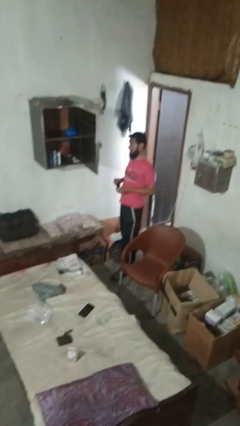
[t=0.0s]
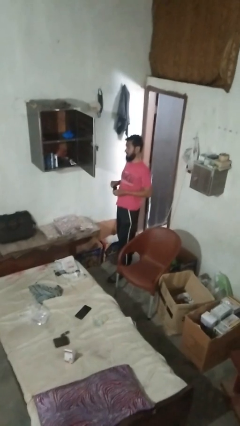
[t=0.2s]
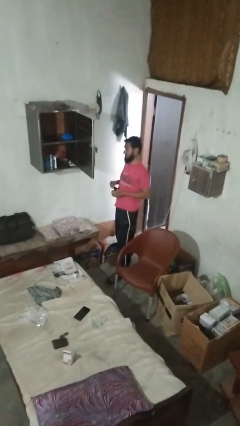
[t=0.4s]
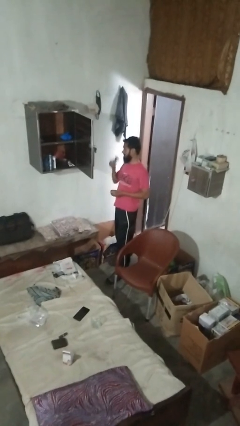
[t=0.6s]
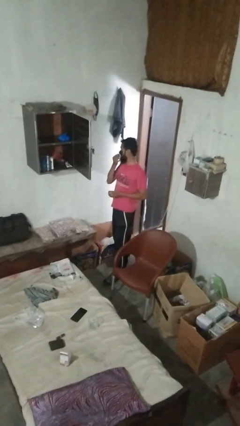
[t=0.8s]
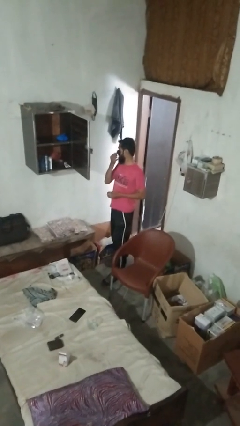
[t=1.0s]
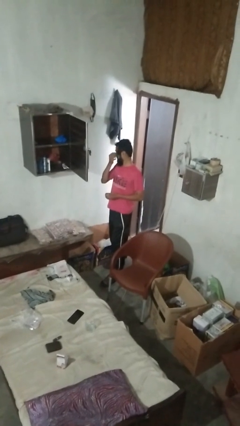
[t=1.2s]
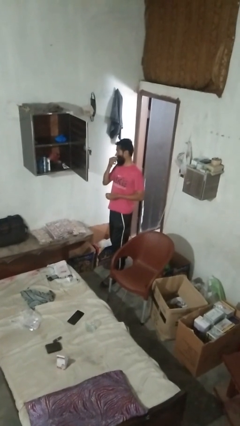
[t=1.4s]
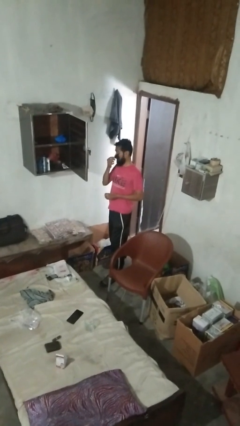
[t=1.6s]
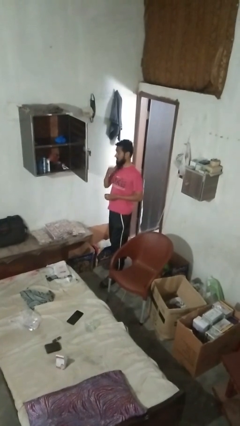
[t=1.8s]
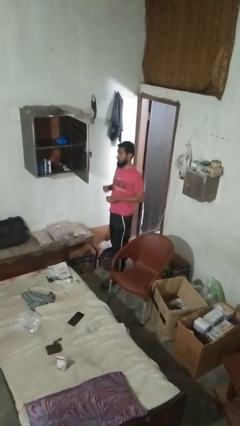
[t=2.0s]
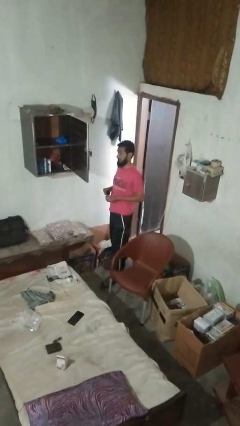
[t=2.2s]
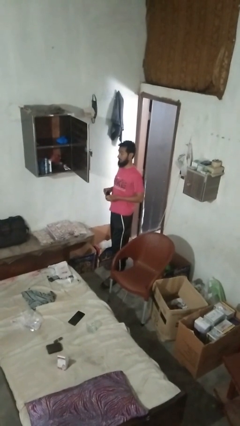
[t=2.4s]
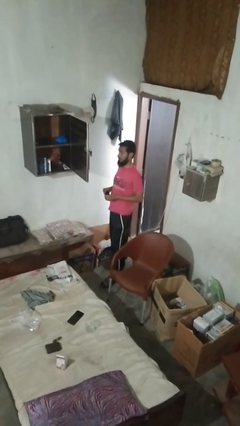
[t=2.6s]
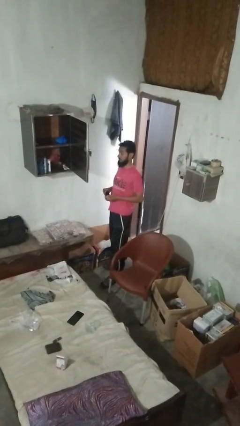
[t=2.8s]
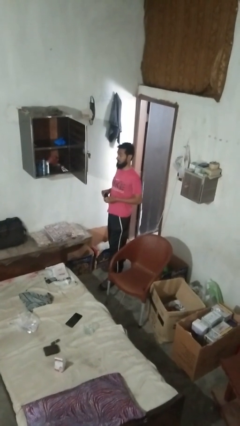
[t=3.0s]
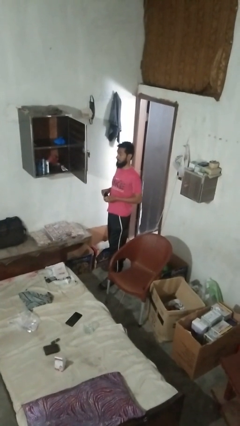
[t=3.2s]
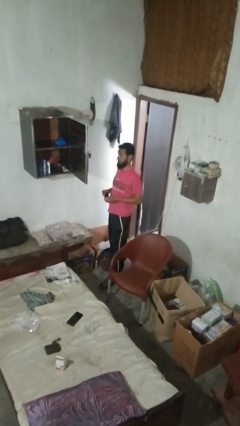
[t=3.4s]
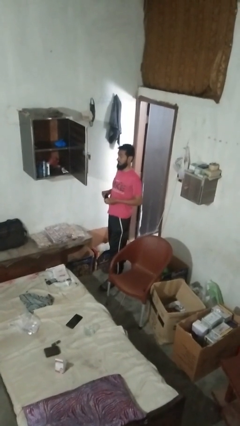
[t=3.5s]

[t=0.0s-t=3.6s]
person applies foundation makeup

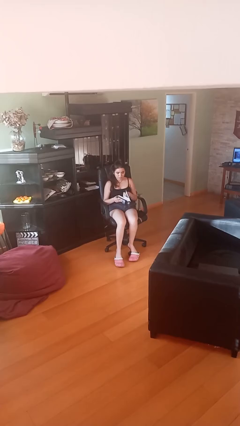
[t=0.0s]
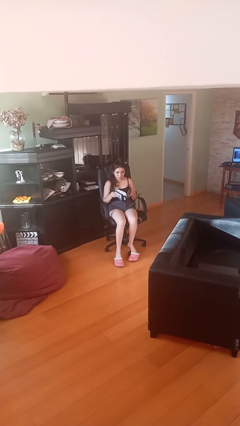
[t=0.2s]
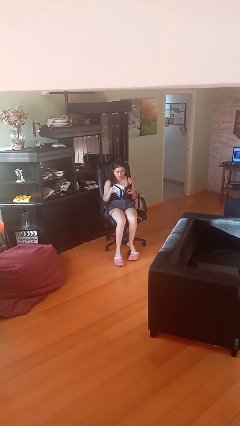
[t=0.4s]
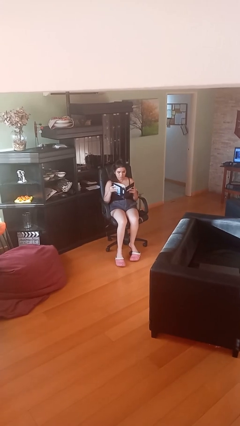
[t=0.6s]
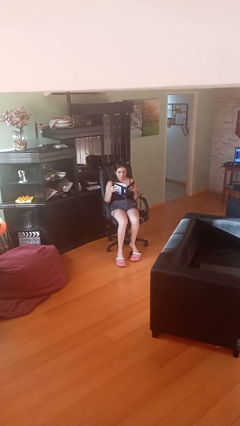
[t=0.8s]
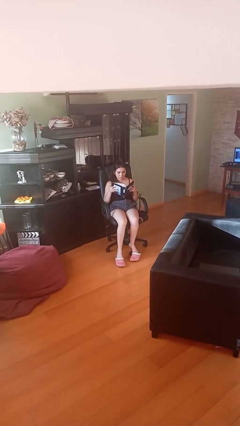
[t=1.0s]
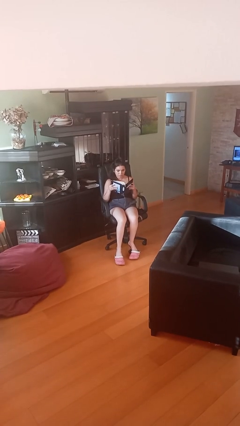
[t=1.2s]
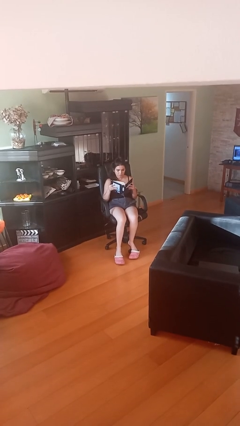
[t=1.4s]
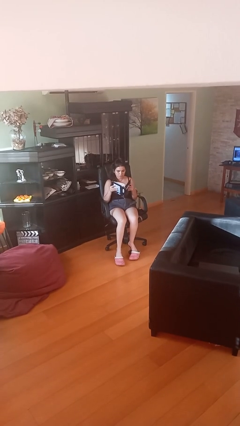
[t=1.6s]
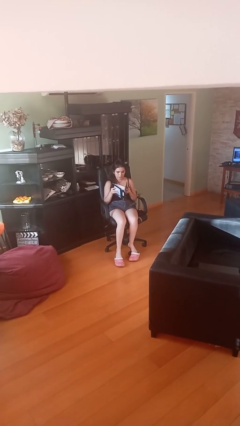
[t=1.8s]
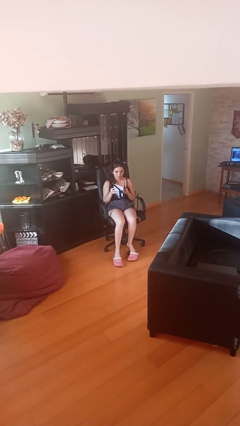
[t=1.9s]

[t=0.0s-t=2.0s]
person reads document

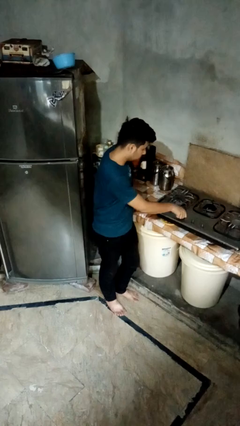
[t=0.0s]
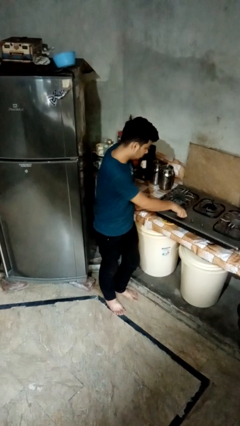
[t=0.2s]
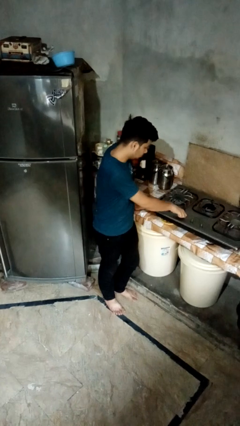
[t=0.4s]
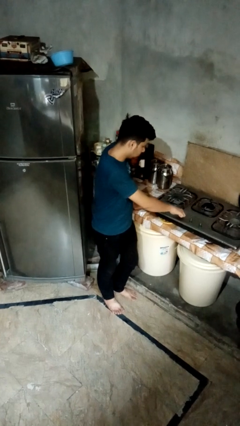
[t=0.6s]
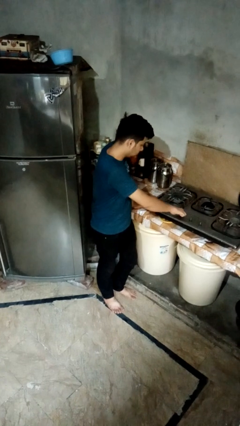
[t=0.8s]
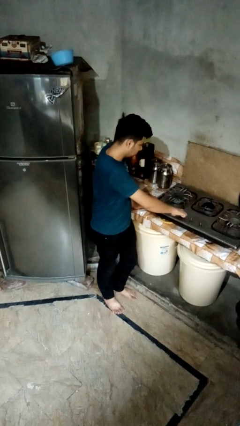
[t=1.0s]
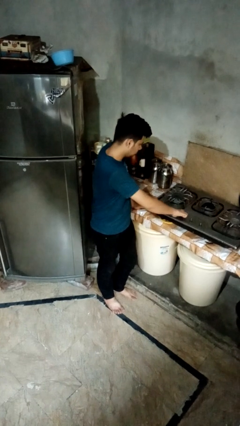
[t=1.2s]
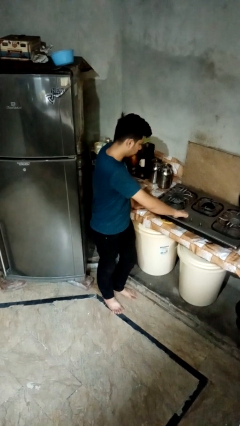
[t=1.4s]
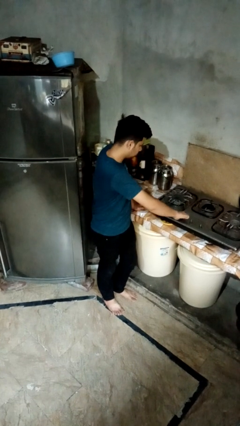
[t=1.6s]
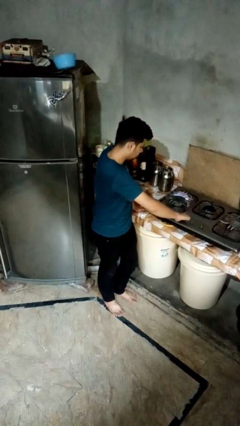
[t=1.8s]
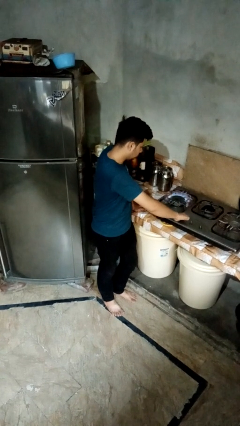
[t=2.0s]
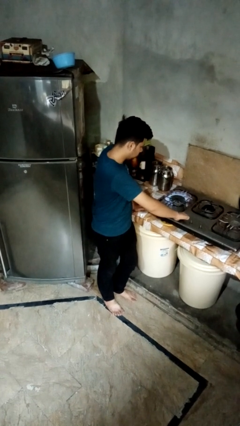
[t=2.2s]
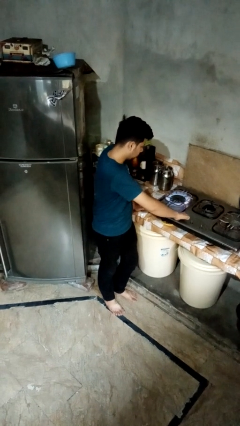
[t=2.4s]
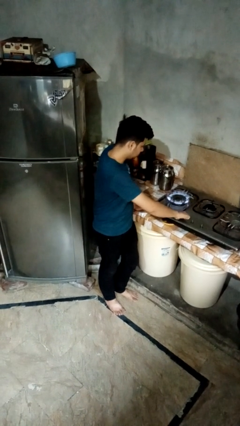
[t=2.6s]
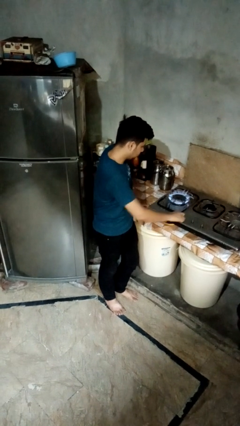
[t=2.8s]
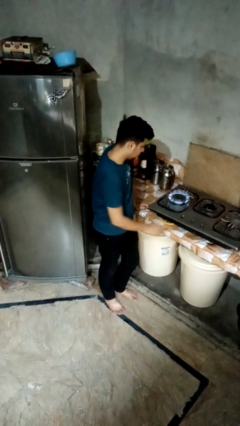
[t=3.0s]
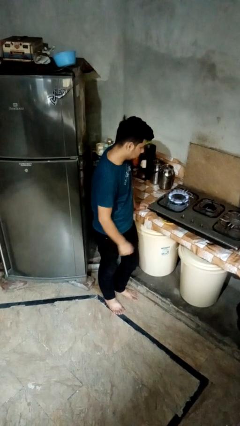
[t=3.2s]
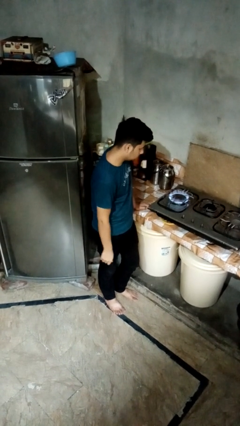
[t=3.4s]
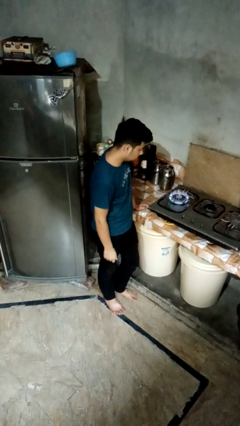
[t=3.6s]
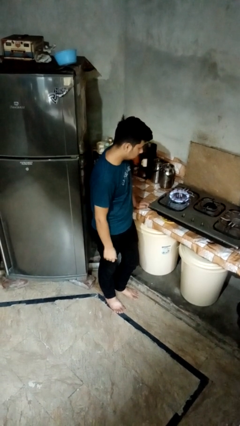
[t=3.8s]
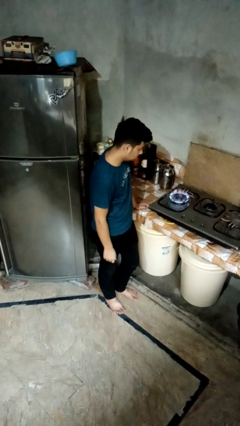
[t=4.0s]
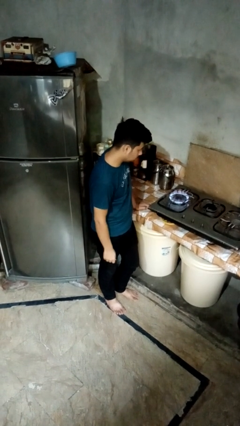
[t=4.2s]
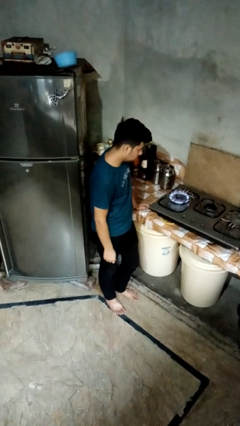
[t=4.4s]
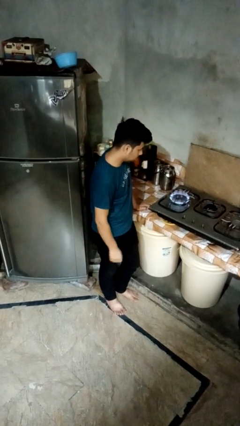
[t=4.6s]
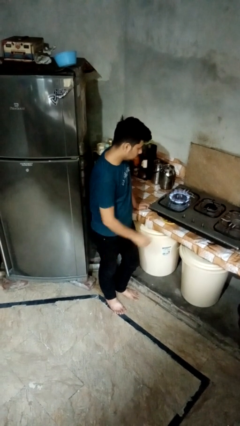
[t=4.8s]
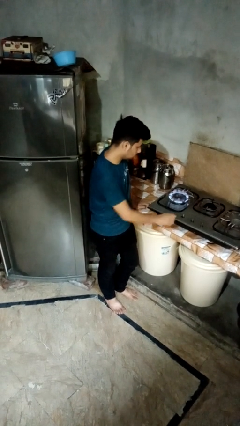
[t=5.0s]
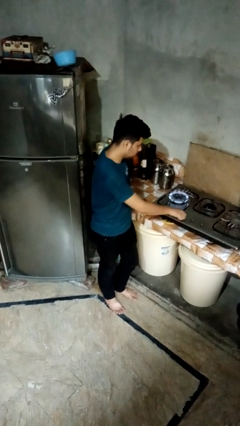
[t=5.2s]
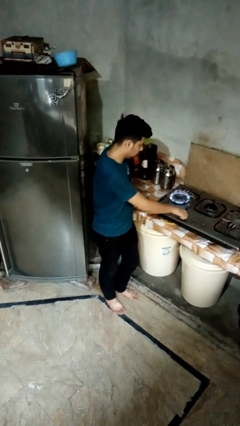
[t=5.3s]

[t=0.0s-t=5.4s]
person turns on stovetop

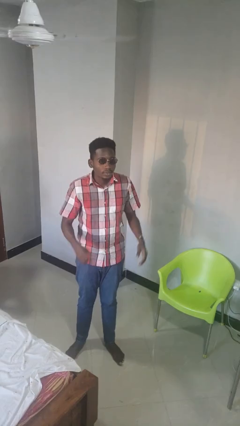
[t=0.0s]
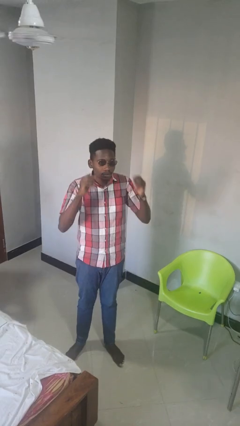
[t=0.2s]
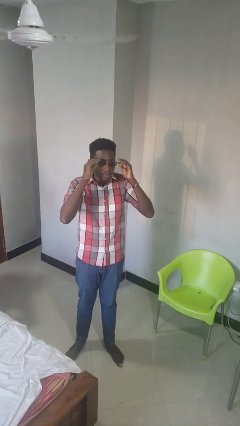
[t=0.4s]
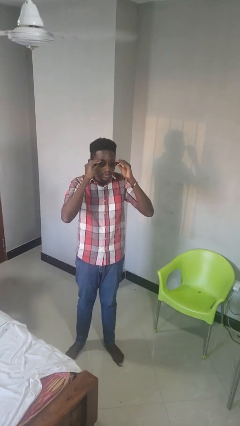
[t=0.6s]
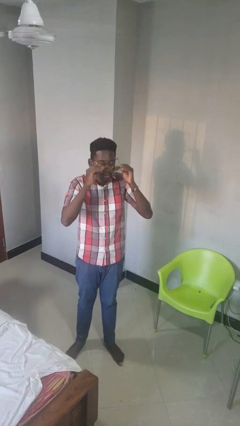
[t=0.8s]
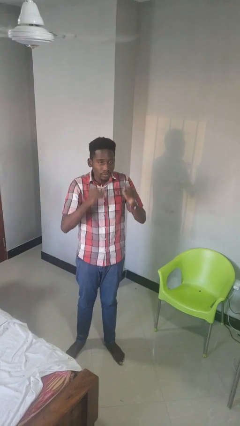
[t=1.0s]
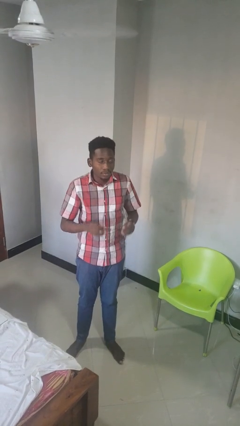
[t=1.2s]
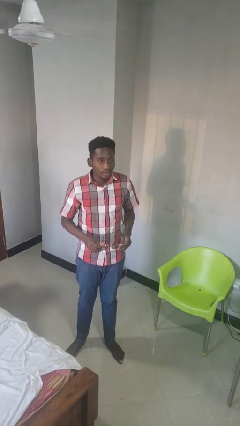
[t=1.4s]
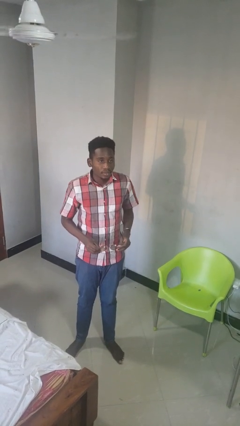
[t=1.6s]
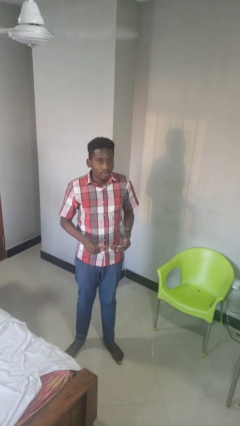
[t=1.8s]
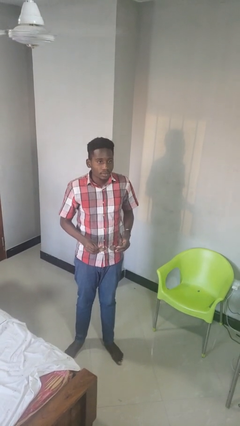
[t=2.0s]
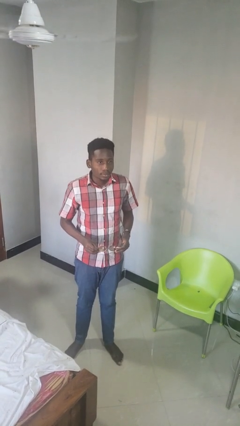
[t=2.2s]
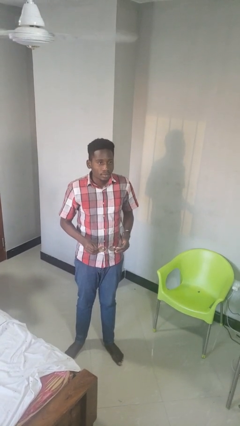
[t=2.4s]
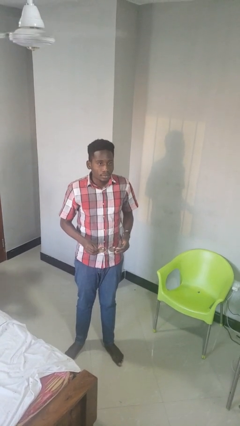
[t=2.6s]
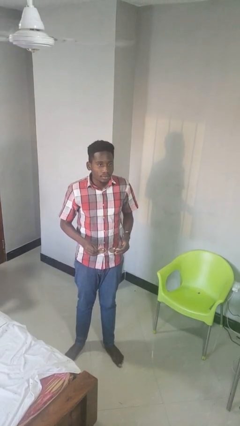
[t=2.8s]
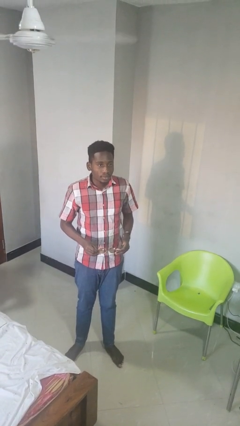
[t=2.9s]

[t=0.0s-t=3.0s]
person takes off sunglasses

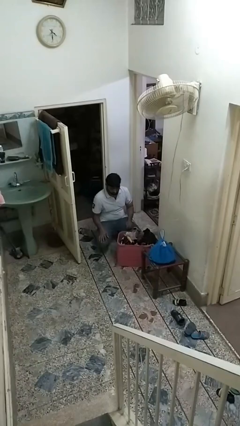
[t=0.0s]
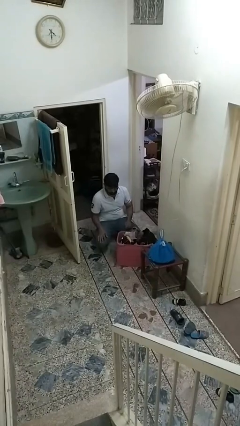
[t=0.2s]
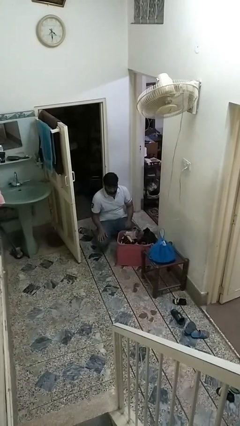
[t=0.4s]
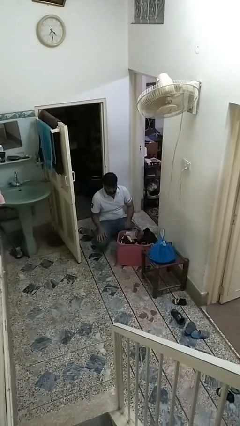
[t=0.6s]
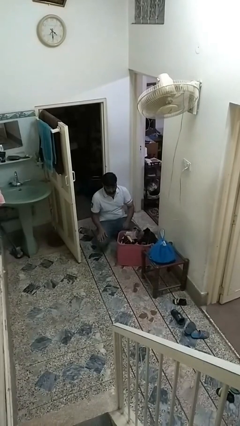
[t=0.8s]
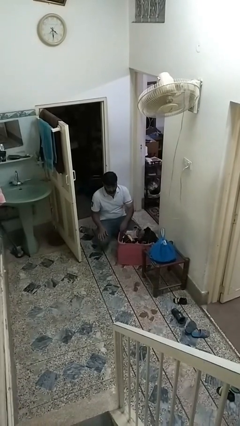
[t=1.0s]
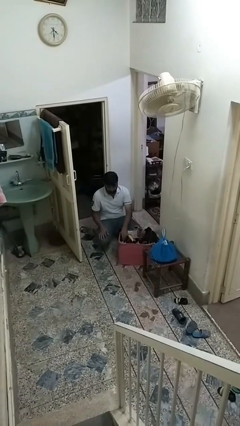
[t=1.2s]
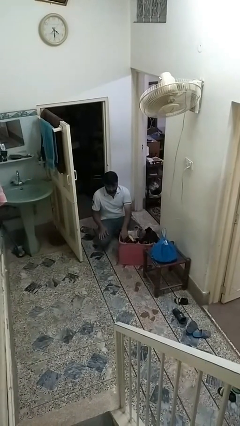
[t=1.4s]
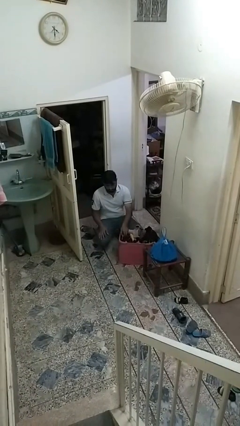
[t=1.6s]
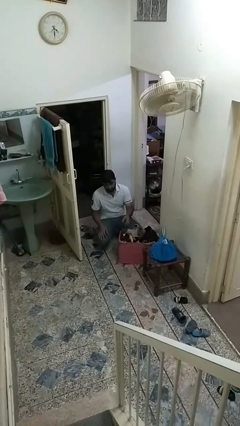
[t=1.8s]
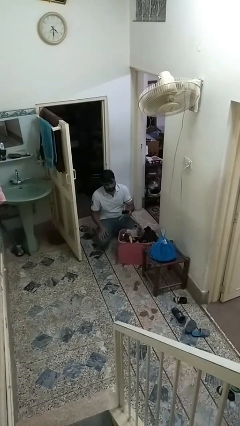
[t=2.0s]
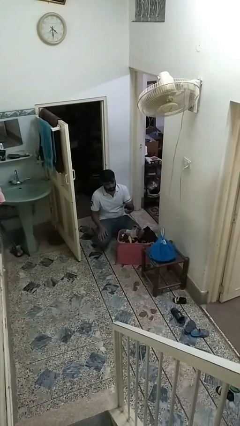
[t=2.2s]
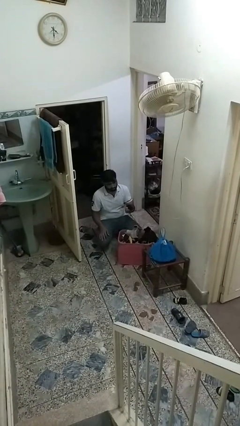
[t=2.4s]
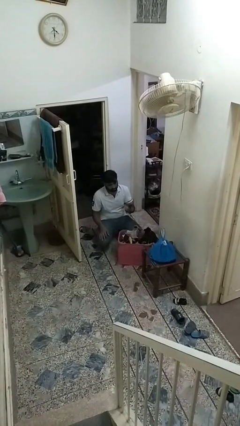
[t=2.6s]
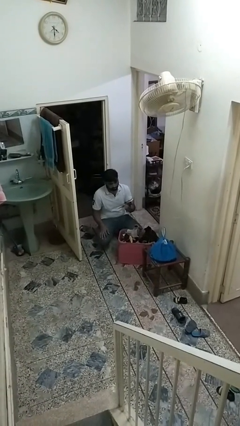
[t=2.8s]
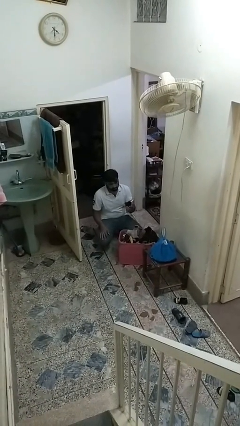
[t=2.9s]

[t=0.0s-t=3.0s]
person takes object from basket

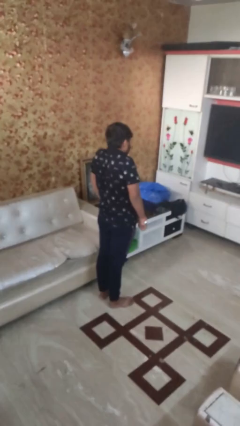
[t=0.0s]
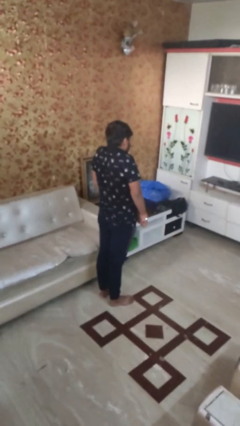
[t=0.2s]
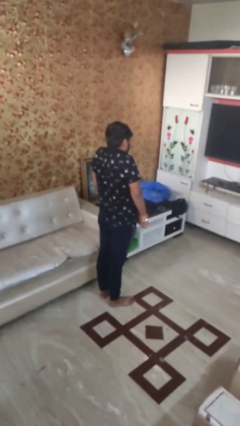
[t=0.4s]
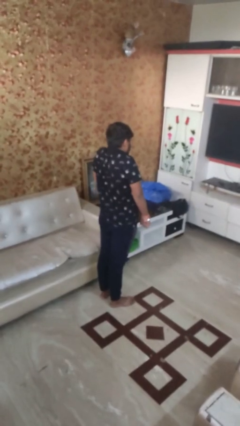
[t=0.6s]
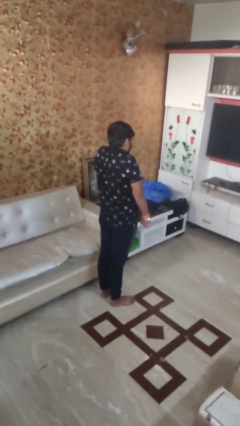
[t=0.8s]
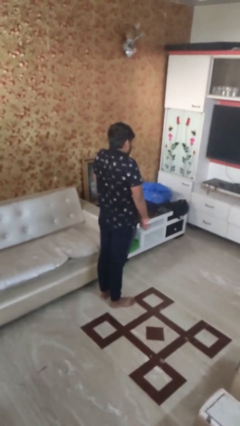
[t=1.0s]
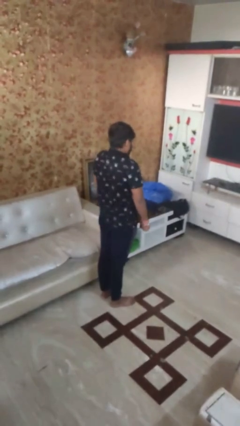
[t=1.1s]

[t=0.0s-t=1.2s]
person shrugs
